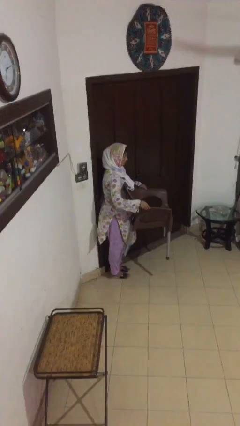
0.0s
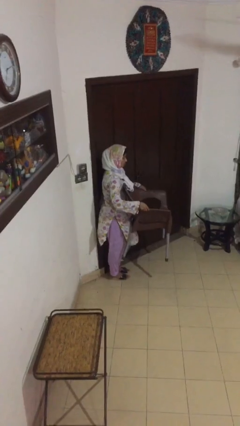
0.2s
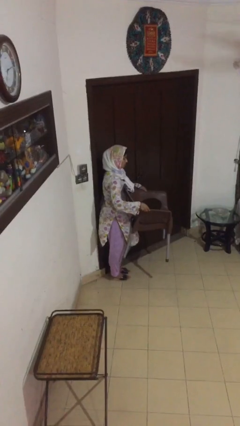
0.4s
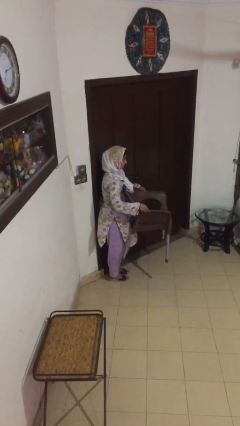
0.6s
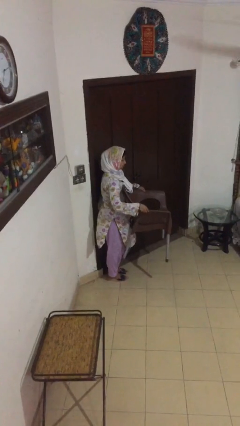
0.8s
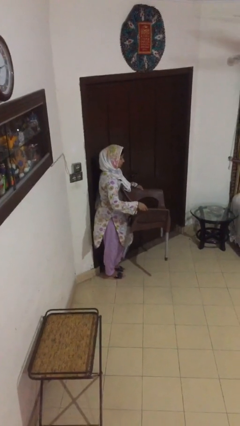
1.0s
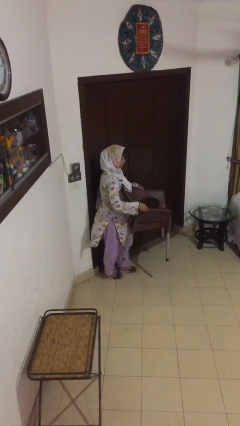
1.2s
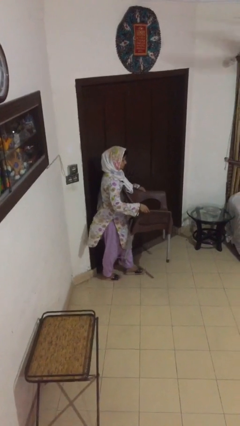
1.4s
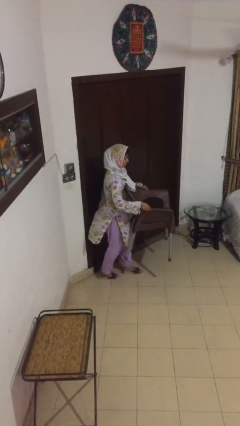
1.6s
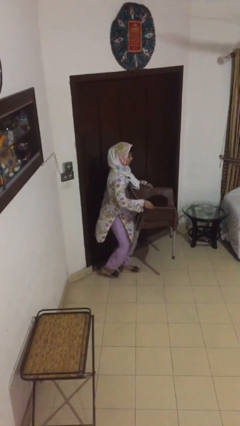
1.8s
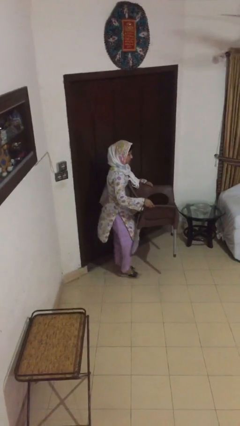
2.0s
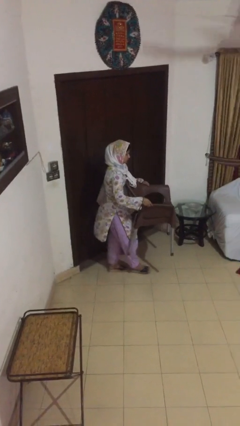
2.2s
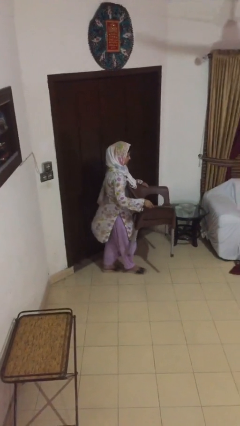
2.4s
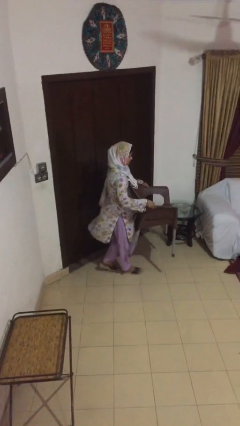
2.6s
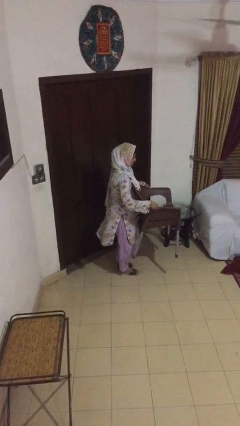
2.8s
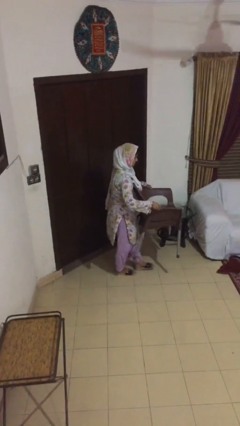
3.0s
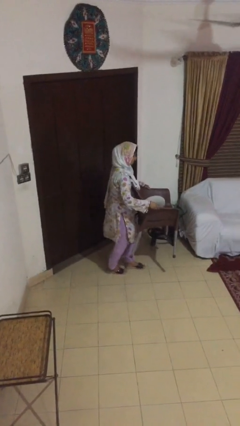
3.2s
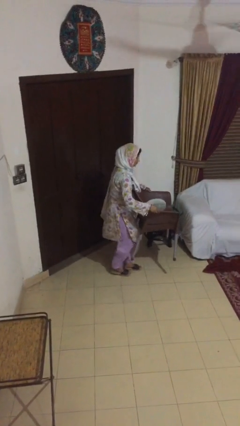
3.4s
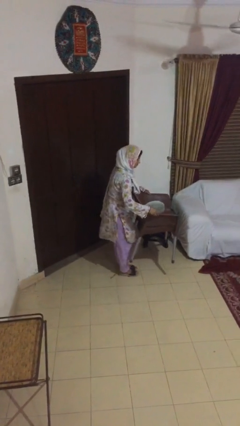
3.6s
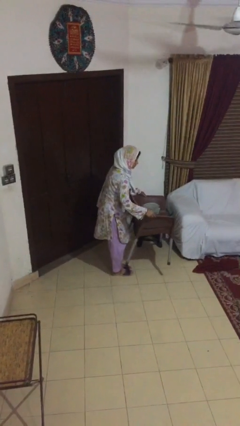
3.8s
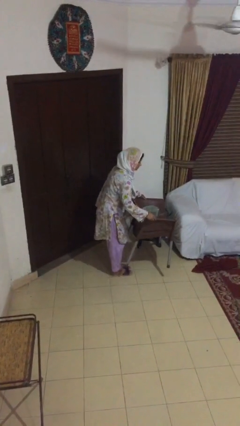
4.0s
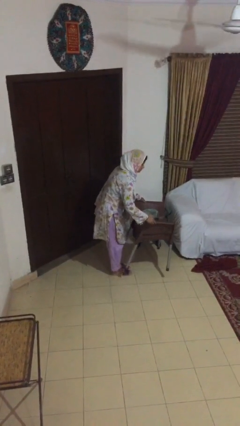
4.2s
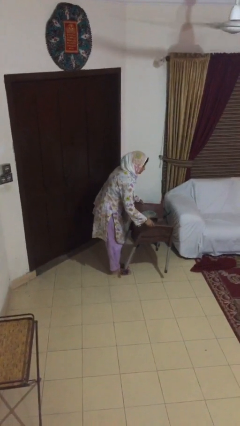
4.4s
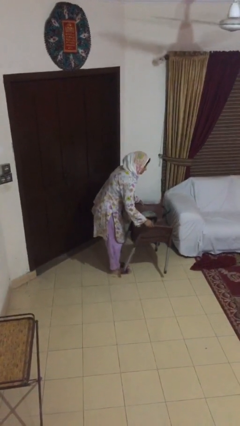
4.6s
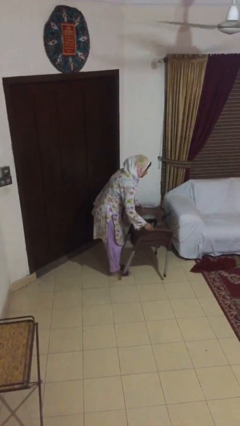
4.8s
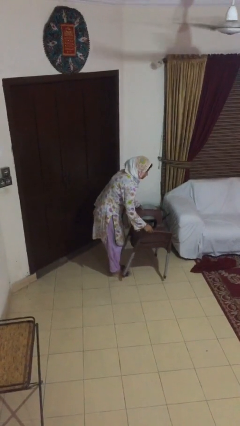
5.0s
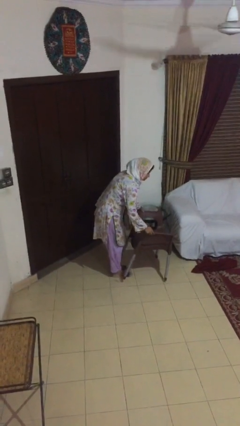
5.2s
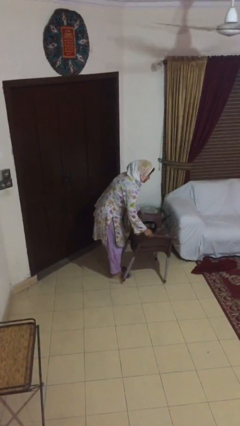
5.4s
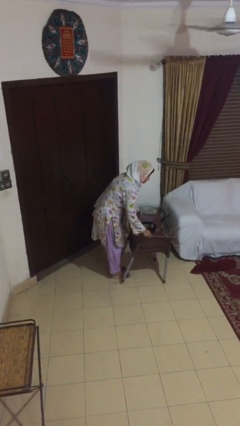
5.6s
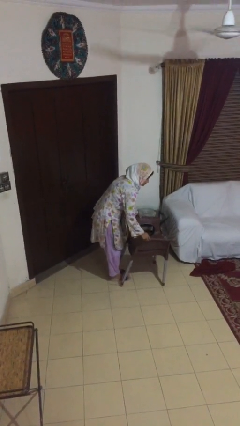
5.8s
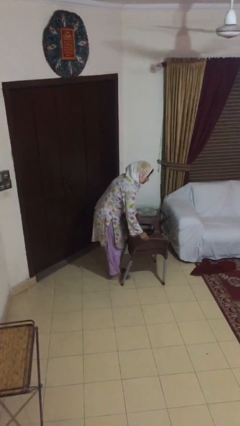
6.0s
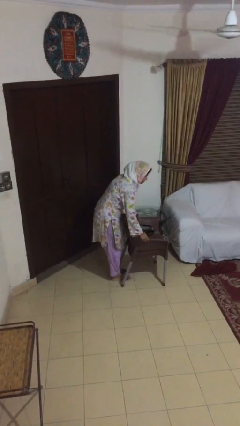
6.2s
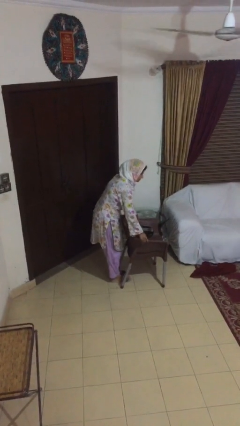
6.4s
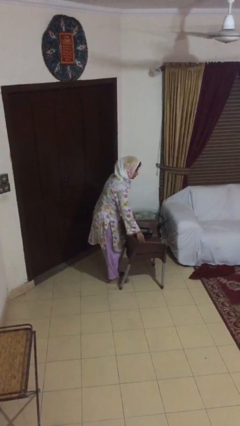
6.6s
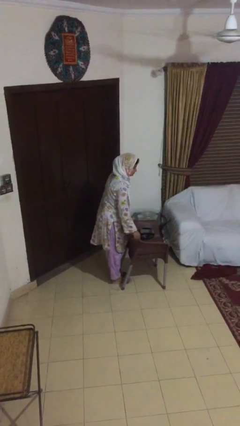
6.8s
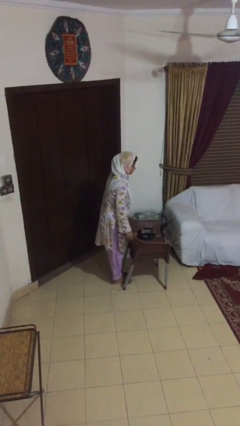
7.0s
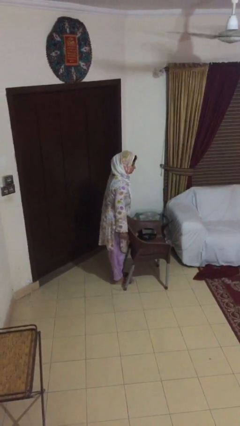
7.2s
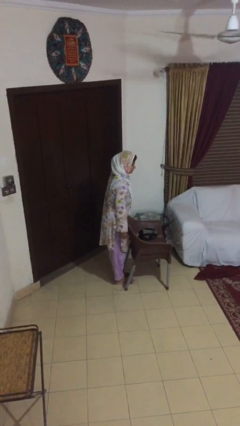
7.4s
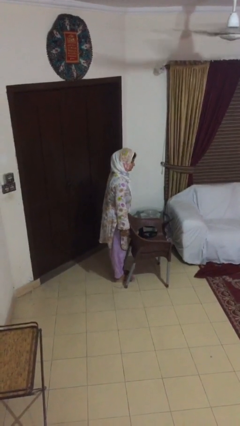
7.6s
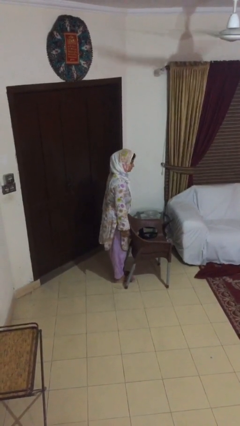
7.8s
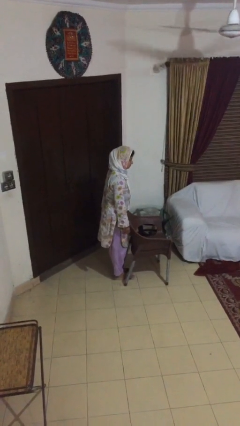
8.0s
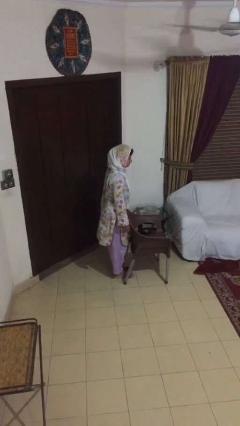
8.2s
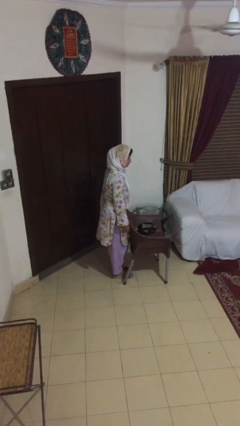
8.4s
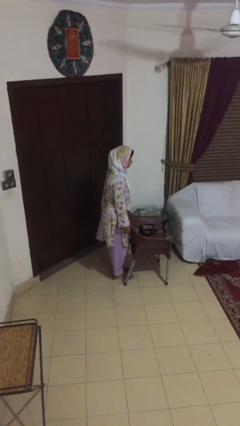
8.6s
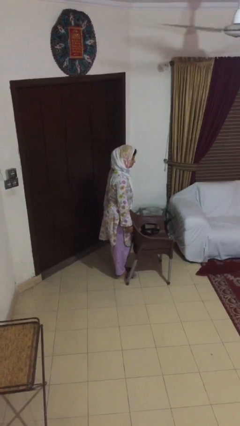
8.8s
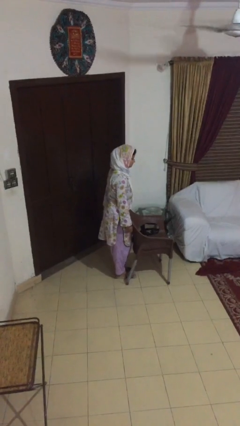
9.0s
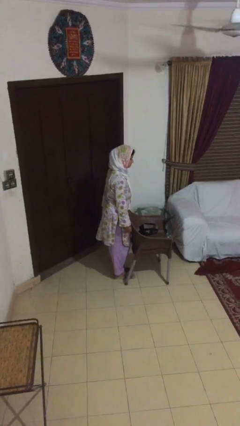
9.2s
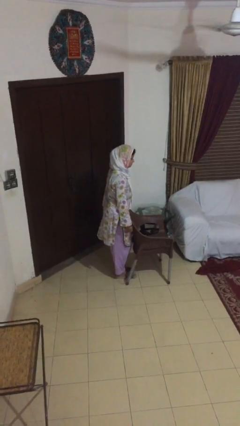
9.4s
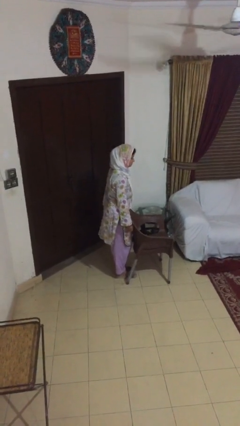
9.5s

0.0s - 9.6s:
person puts down object on floor

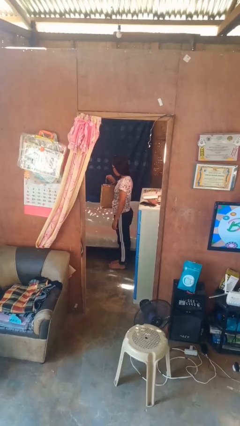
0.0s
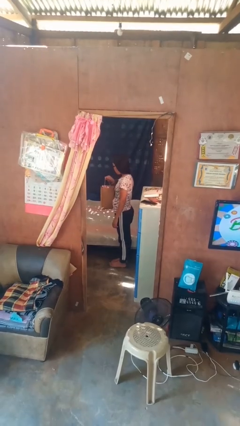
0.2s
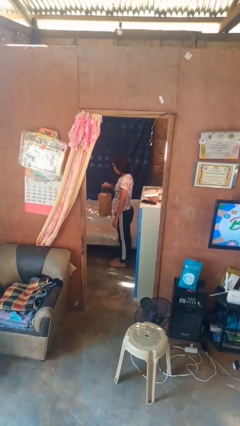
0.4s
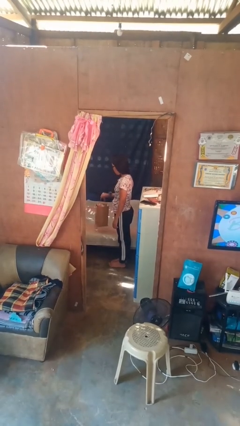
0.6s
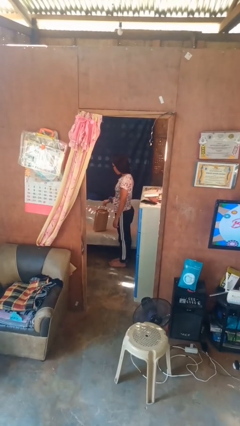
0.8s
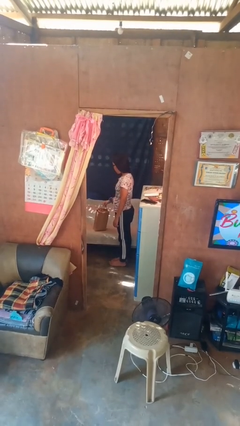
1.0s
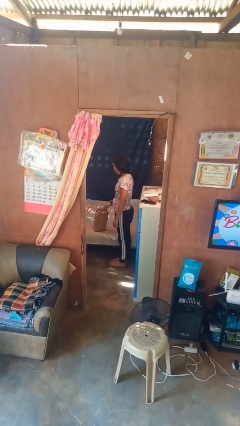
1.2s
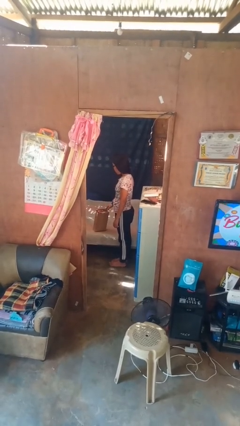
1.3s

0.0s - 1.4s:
person puts down object on bed

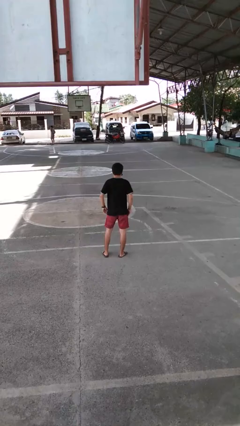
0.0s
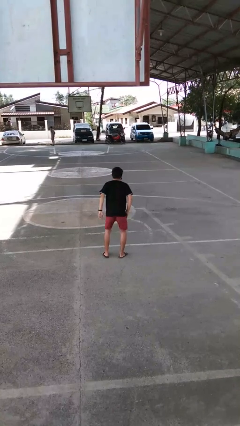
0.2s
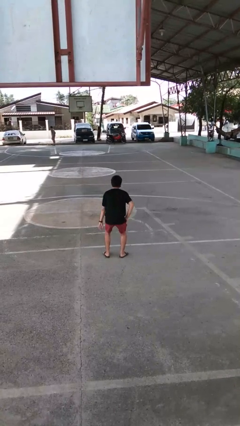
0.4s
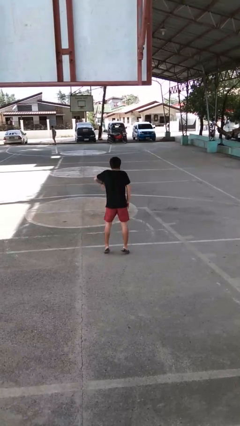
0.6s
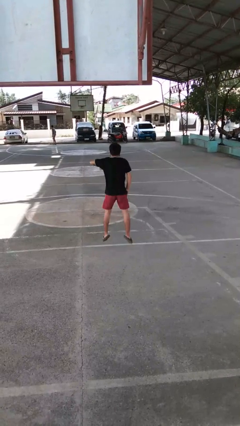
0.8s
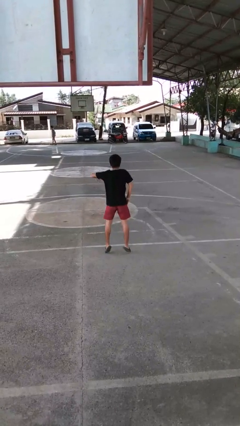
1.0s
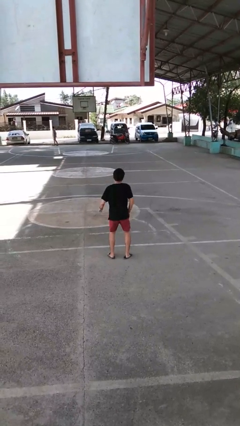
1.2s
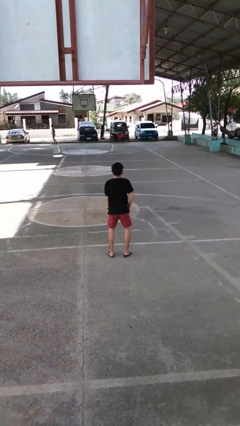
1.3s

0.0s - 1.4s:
person jumps

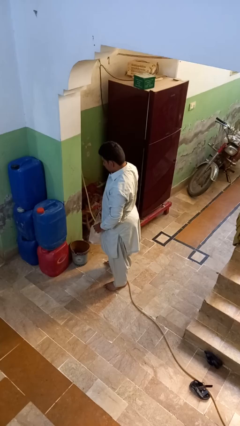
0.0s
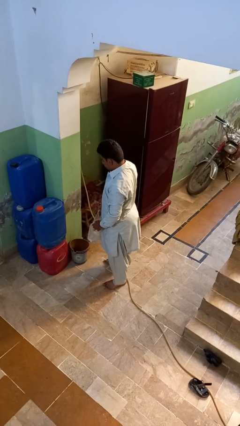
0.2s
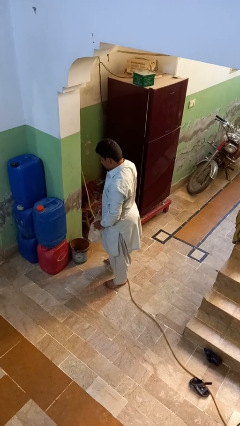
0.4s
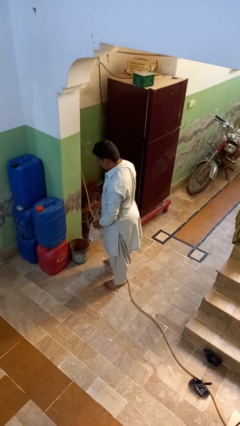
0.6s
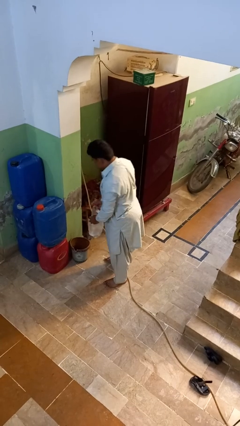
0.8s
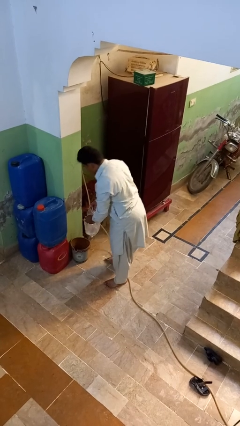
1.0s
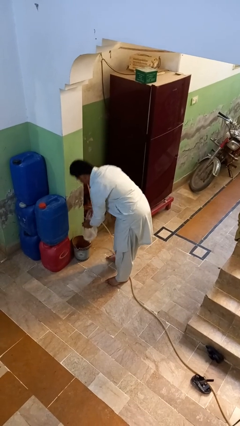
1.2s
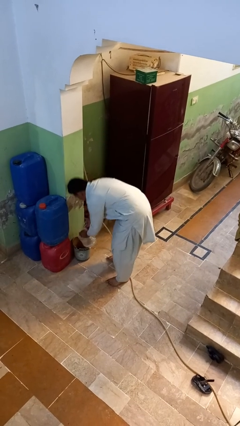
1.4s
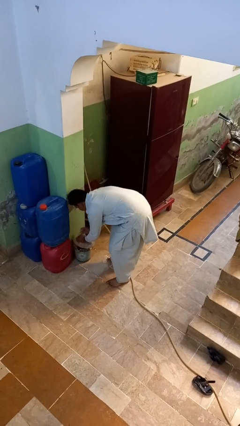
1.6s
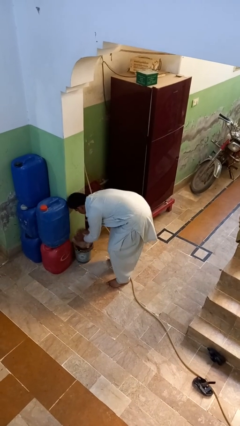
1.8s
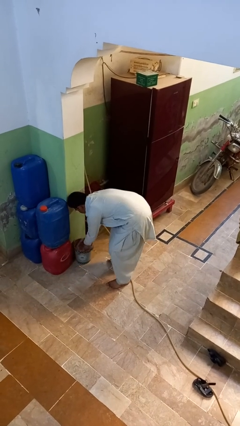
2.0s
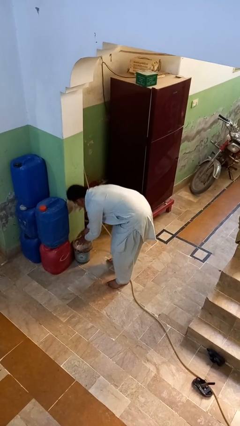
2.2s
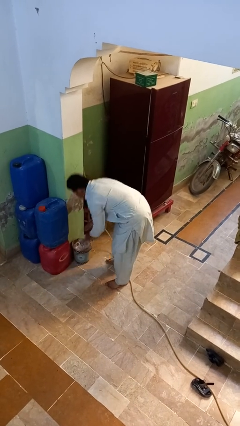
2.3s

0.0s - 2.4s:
person inserts trashbag into trashcan

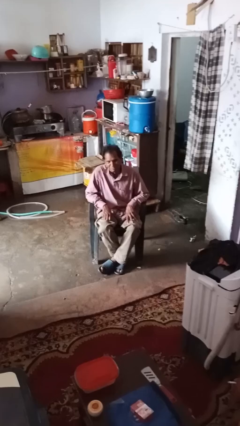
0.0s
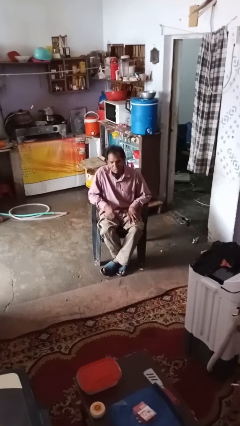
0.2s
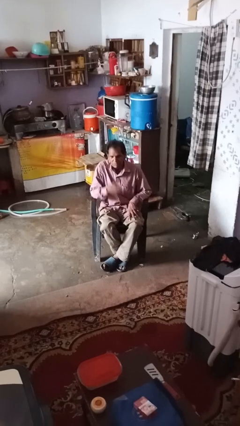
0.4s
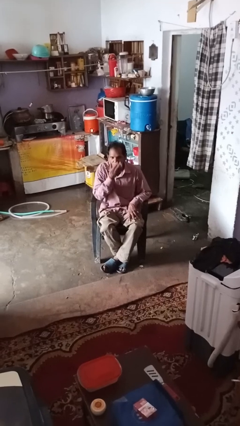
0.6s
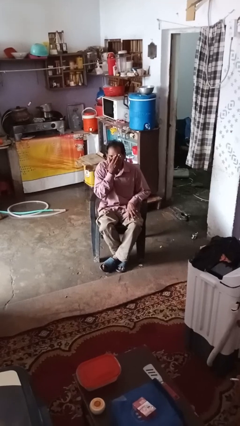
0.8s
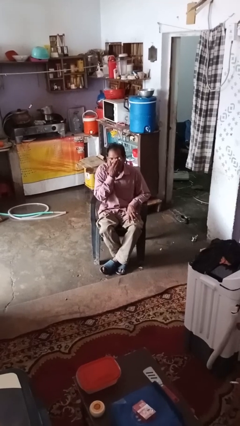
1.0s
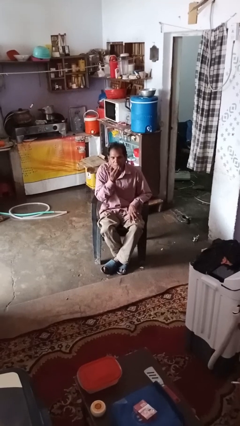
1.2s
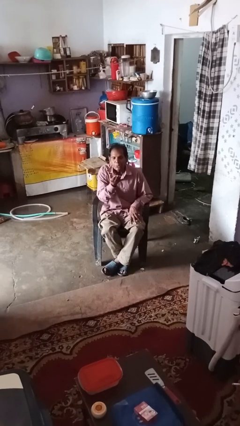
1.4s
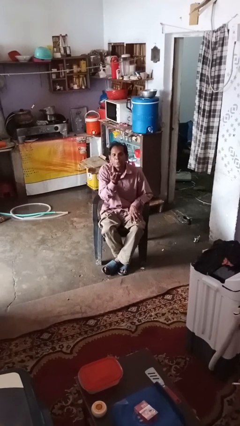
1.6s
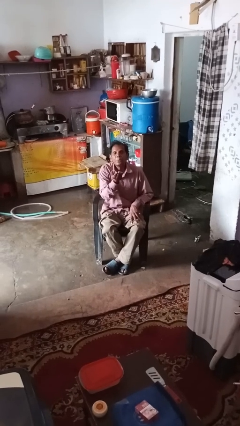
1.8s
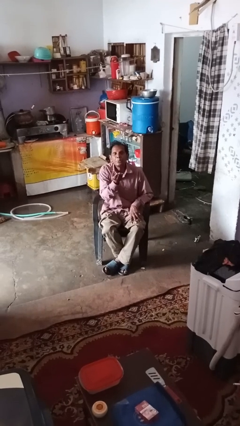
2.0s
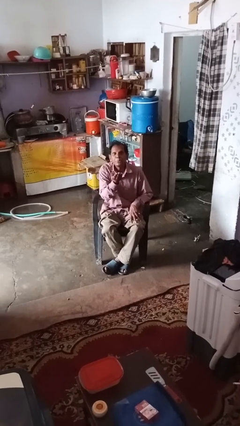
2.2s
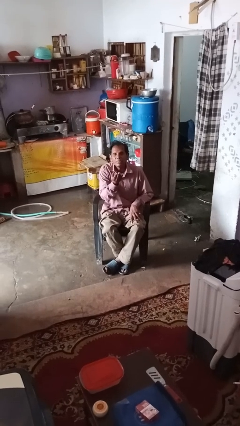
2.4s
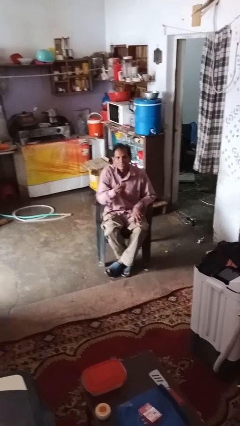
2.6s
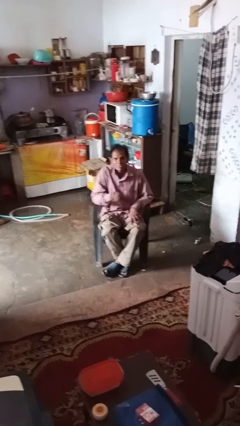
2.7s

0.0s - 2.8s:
person gestures blow kiss

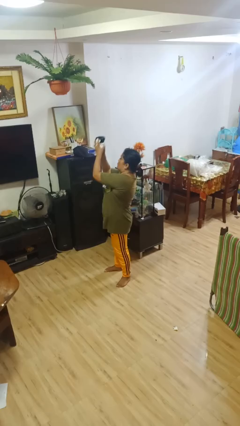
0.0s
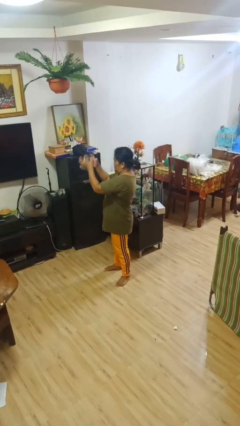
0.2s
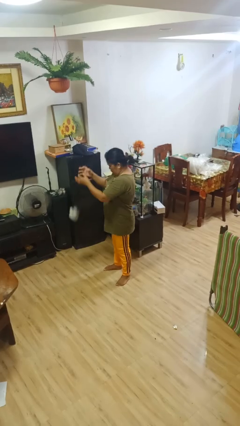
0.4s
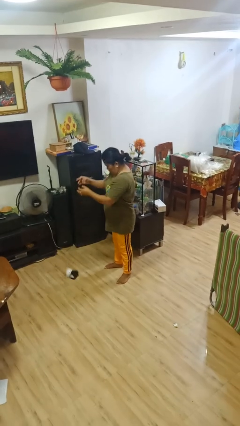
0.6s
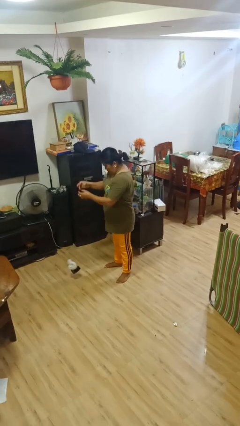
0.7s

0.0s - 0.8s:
person catches dropped object
